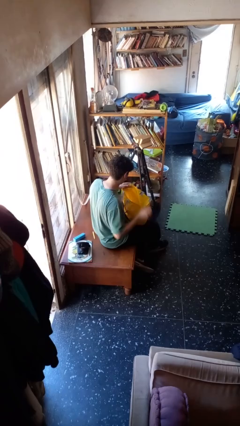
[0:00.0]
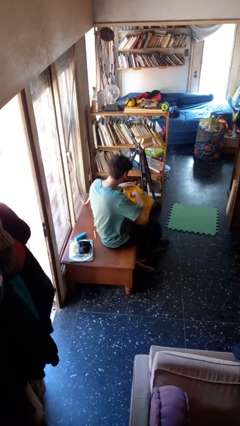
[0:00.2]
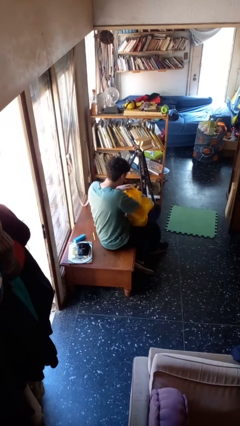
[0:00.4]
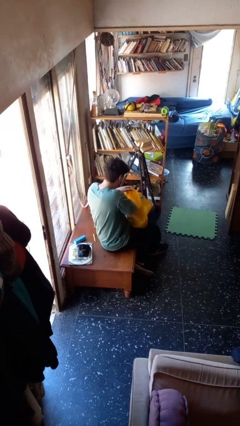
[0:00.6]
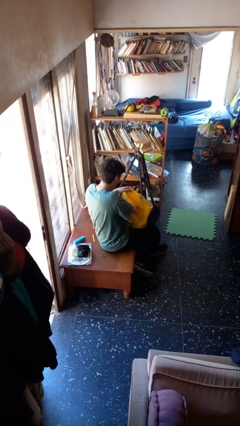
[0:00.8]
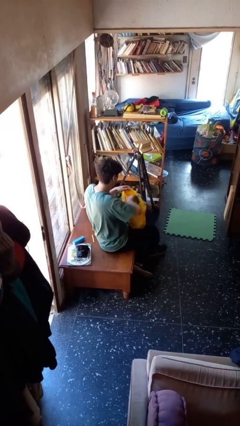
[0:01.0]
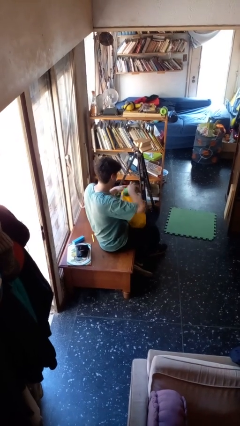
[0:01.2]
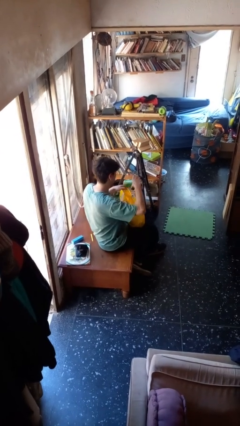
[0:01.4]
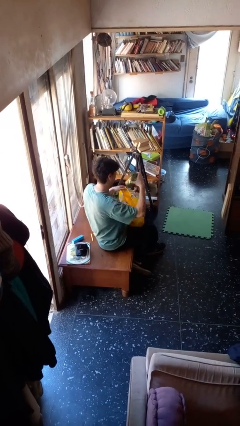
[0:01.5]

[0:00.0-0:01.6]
person takes object from bag

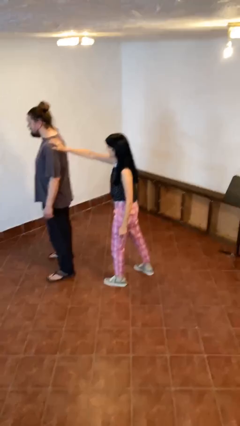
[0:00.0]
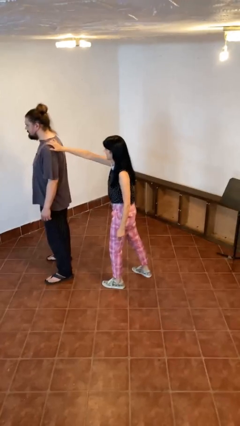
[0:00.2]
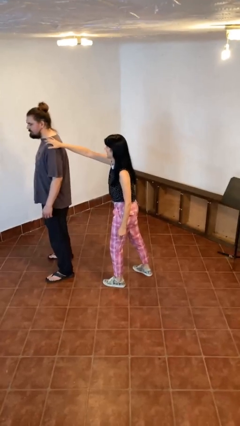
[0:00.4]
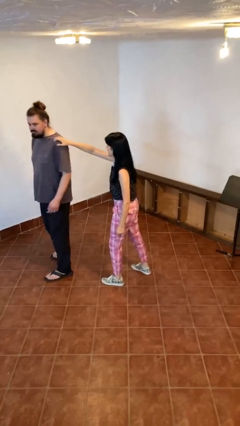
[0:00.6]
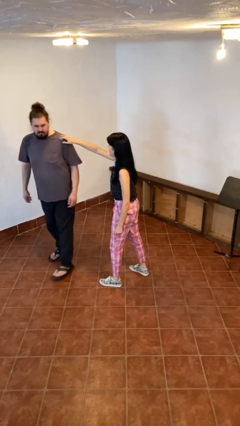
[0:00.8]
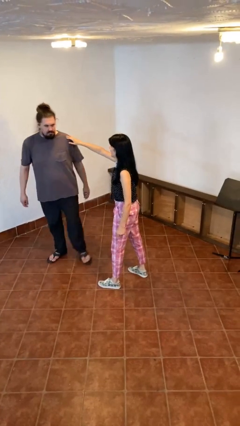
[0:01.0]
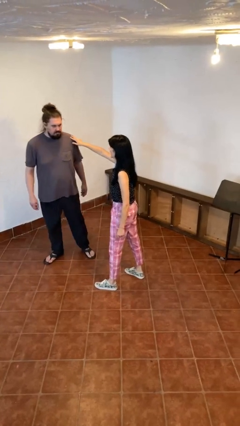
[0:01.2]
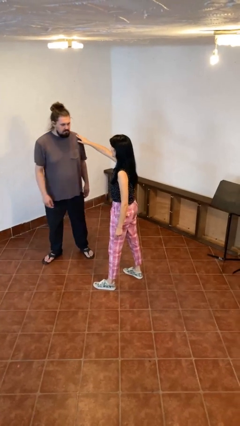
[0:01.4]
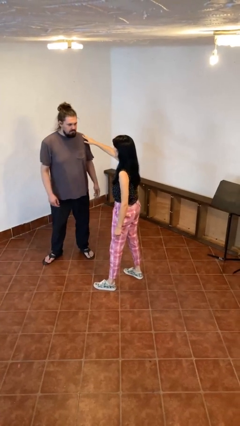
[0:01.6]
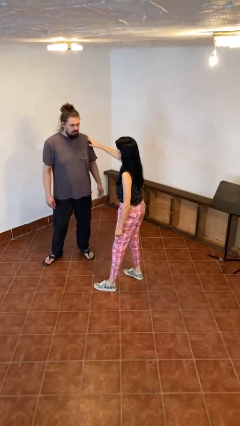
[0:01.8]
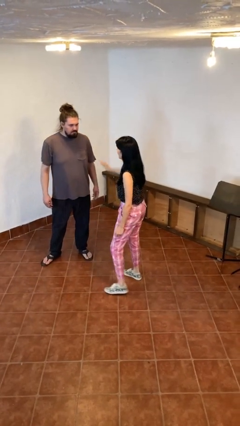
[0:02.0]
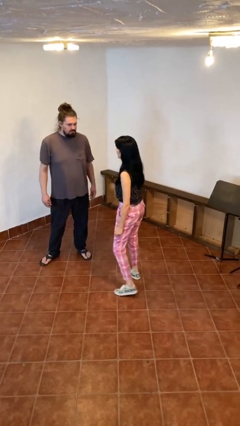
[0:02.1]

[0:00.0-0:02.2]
person spins person around

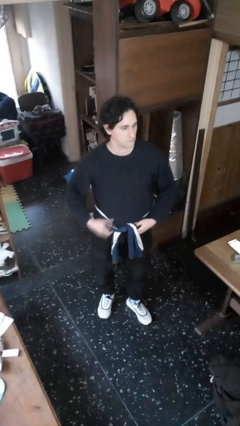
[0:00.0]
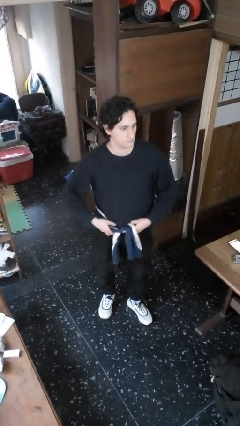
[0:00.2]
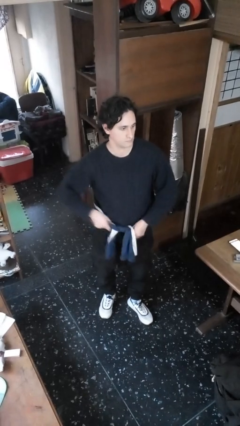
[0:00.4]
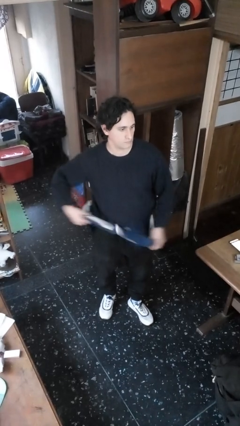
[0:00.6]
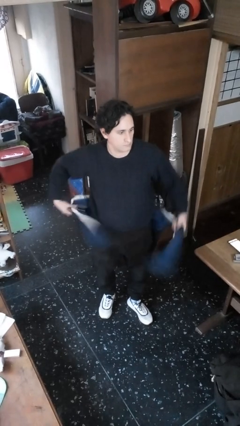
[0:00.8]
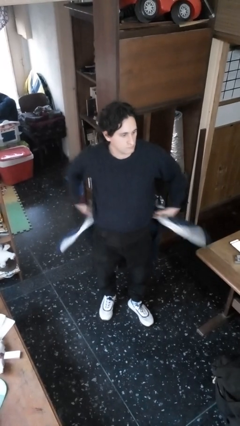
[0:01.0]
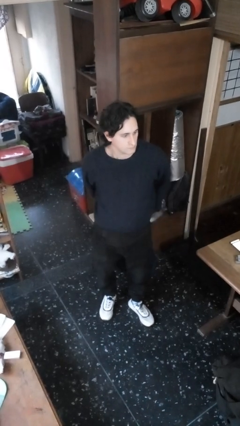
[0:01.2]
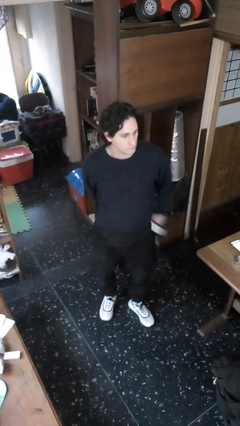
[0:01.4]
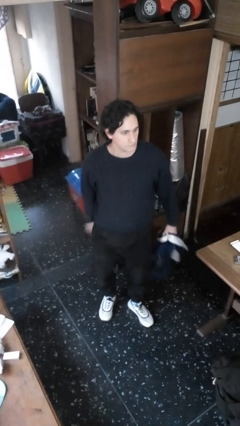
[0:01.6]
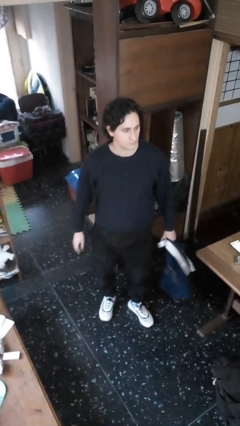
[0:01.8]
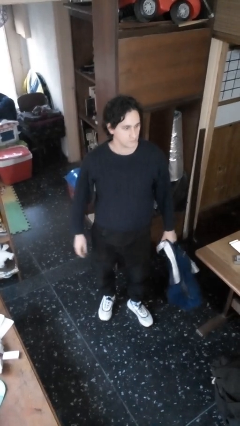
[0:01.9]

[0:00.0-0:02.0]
person unties jacket around waist

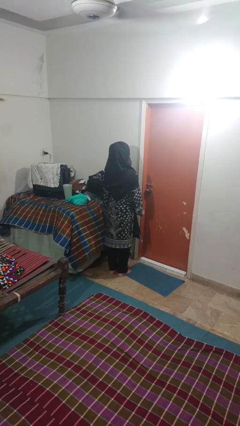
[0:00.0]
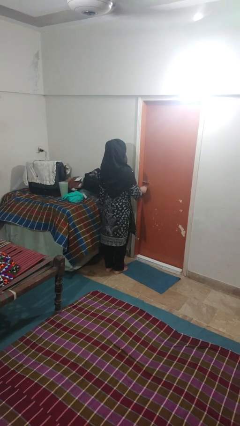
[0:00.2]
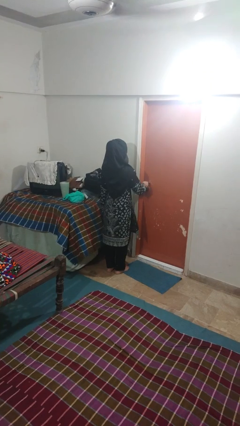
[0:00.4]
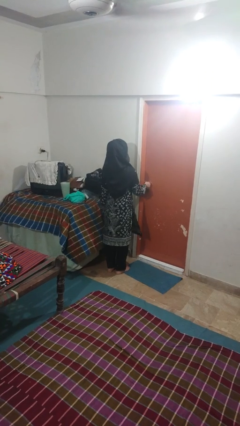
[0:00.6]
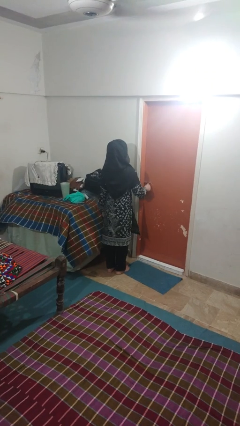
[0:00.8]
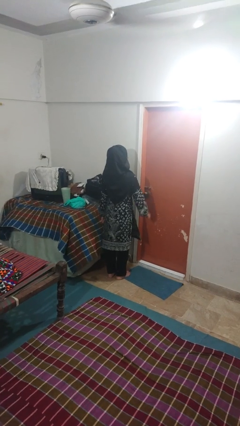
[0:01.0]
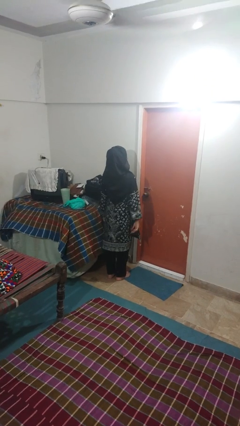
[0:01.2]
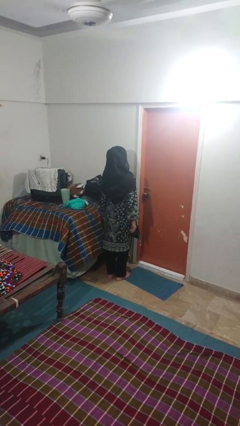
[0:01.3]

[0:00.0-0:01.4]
person unlocks door with keys

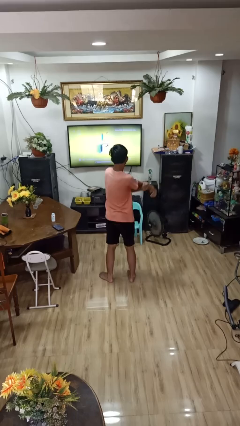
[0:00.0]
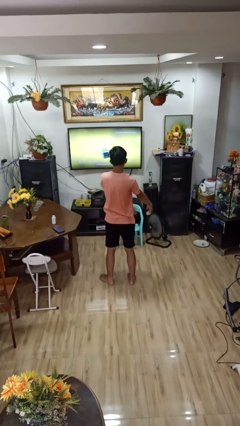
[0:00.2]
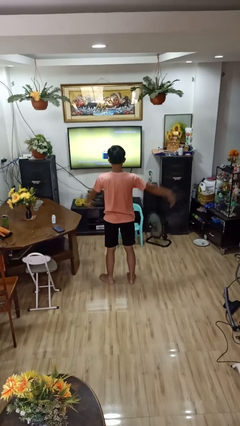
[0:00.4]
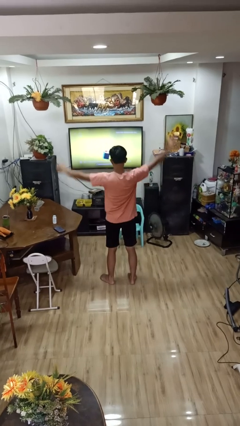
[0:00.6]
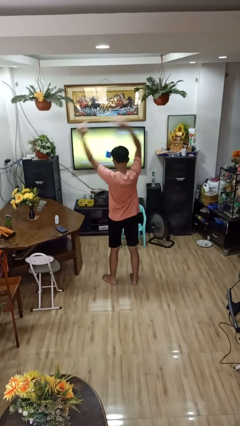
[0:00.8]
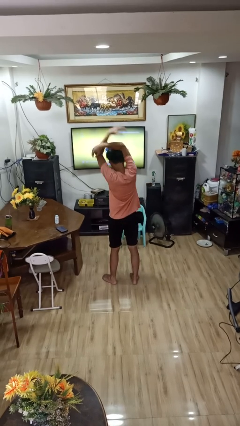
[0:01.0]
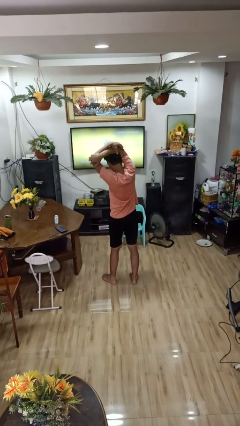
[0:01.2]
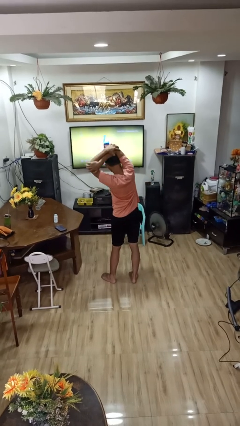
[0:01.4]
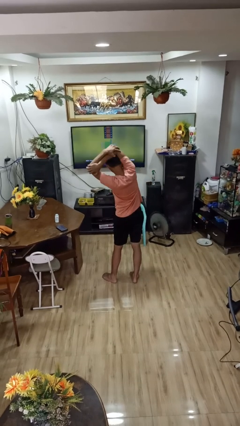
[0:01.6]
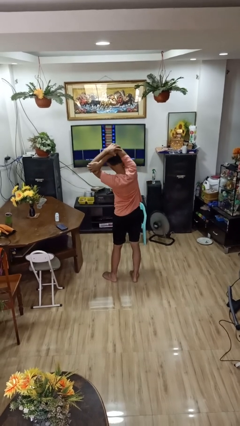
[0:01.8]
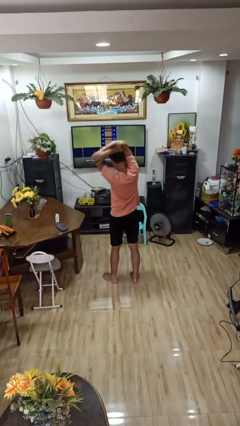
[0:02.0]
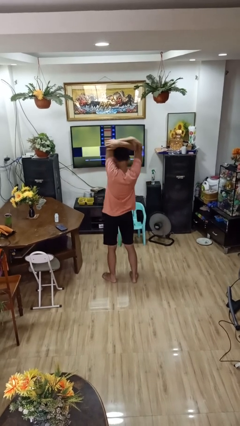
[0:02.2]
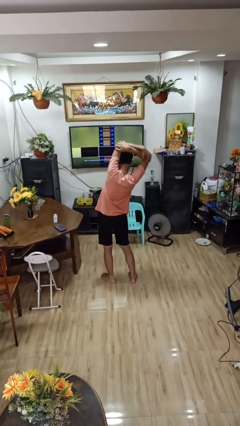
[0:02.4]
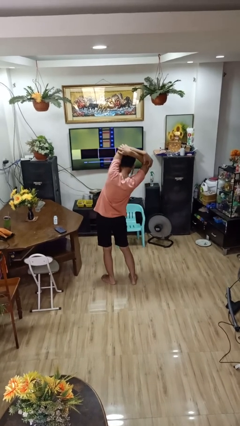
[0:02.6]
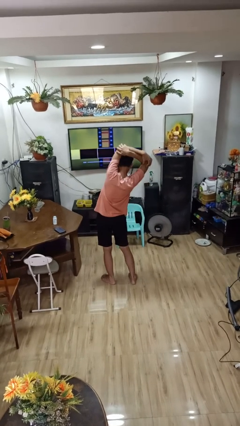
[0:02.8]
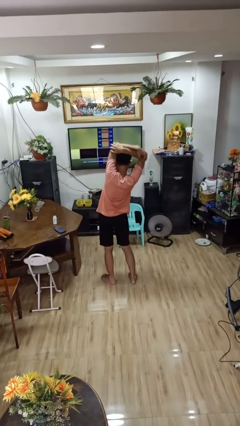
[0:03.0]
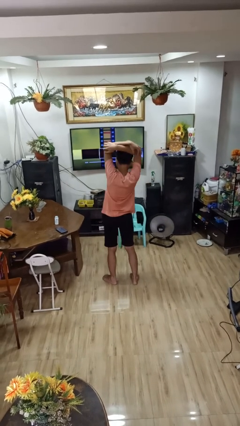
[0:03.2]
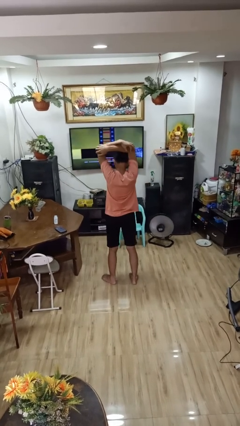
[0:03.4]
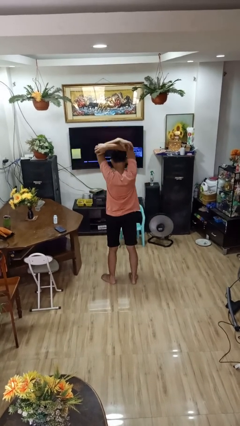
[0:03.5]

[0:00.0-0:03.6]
person stretches arms over head

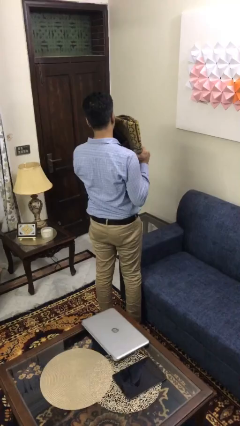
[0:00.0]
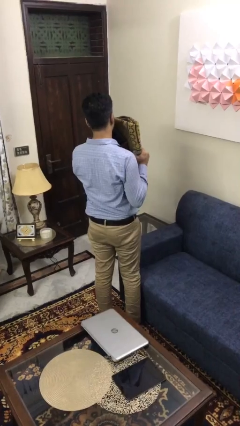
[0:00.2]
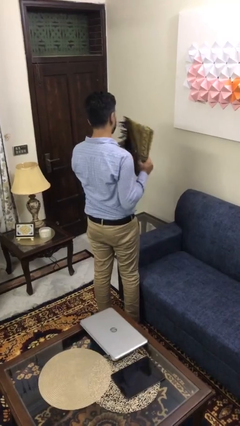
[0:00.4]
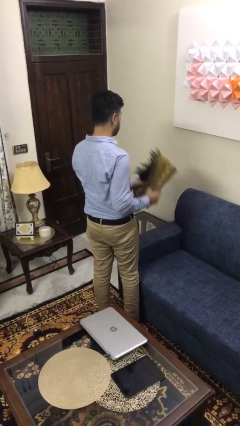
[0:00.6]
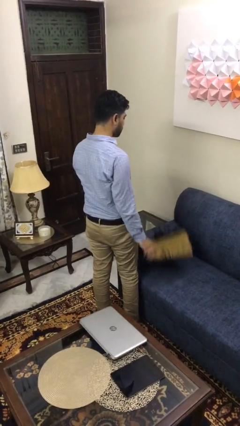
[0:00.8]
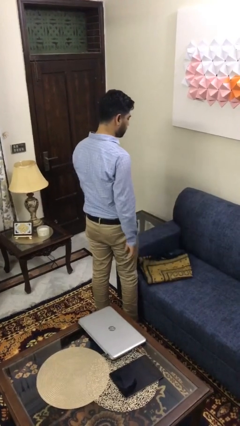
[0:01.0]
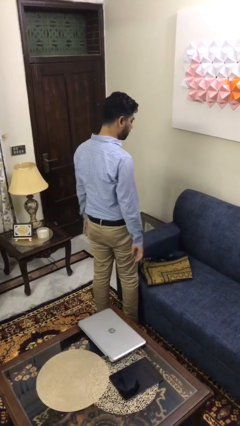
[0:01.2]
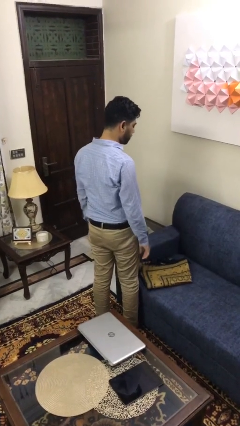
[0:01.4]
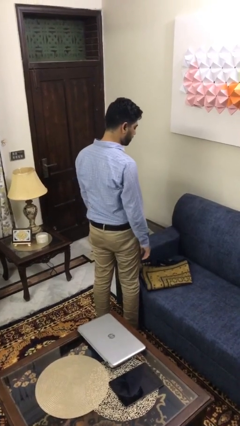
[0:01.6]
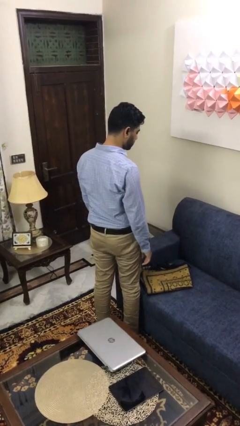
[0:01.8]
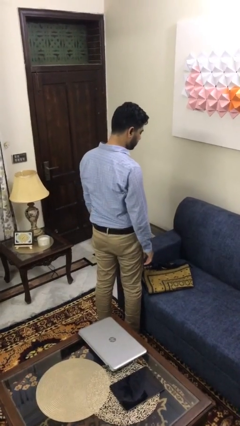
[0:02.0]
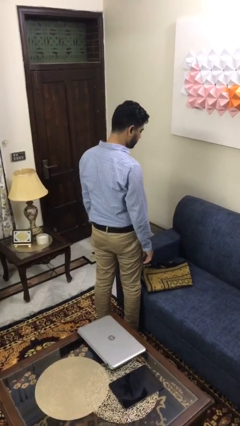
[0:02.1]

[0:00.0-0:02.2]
person puts down object on couch

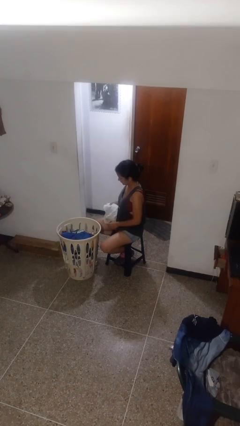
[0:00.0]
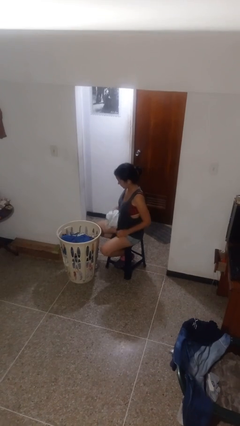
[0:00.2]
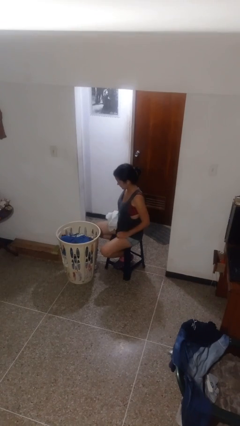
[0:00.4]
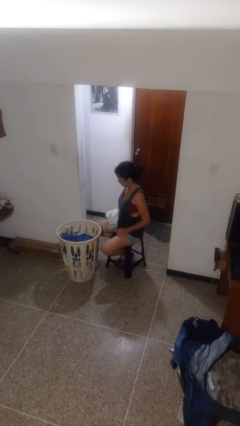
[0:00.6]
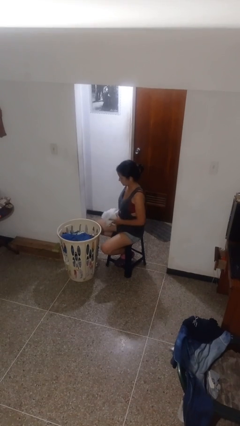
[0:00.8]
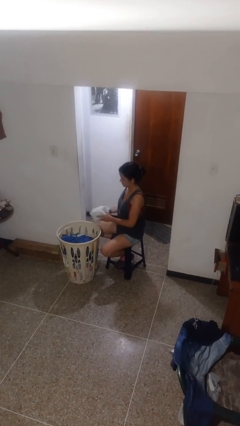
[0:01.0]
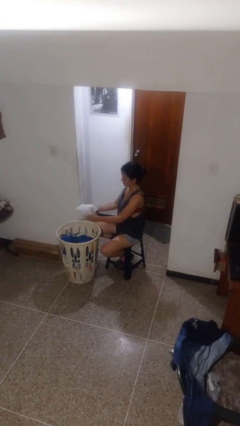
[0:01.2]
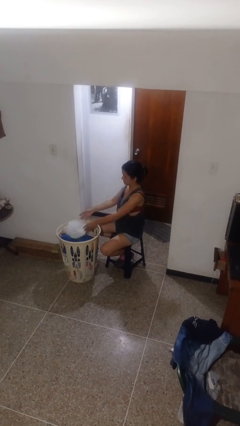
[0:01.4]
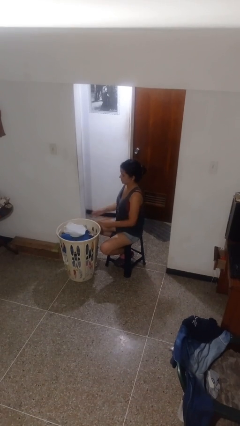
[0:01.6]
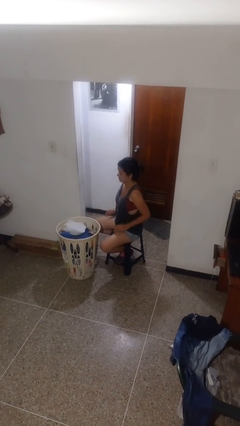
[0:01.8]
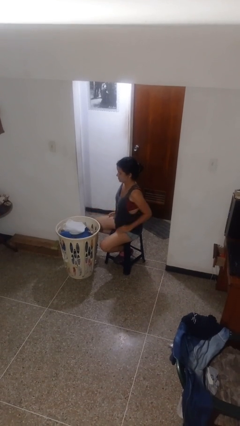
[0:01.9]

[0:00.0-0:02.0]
person puts object into basket

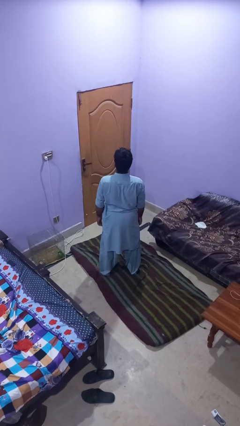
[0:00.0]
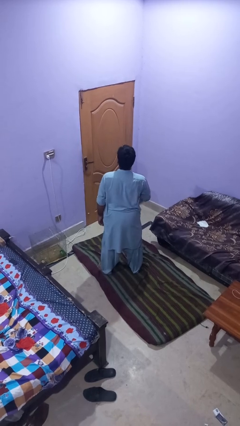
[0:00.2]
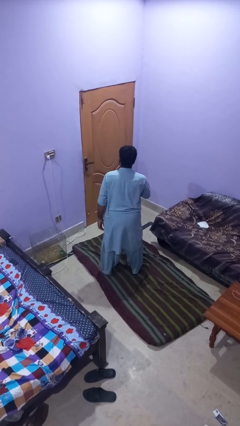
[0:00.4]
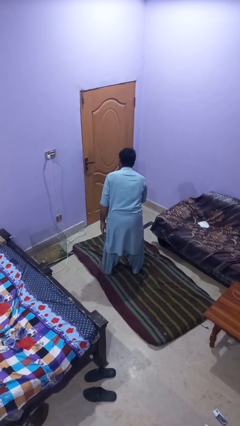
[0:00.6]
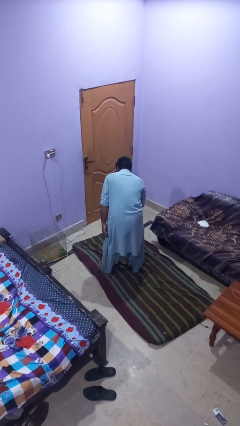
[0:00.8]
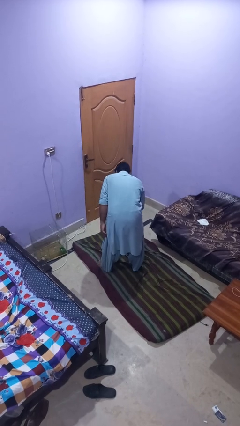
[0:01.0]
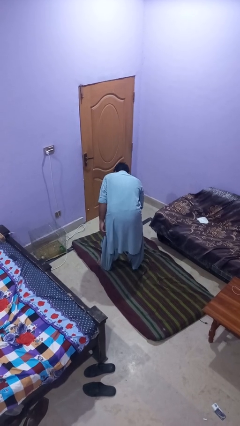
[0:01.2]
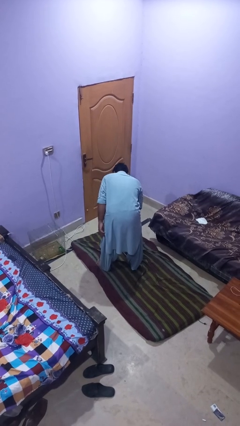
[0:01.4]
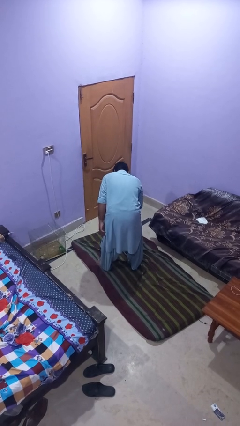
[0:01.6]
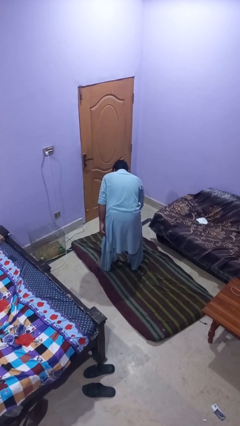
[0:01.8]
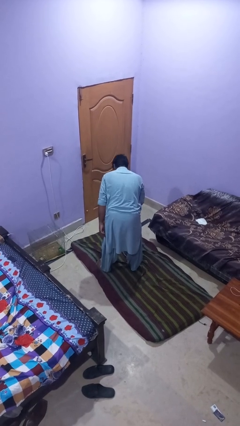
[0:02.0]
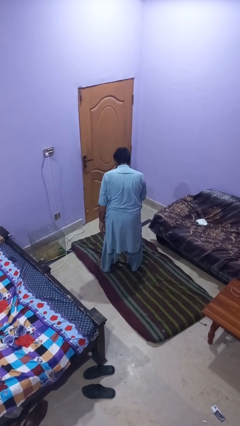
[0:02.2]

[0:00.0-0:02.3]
person bows
